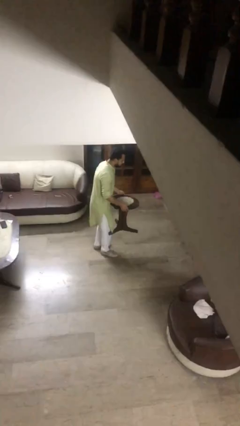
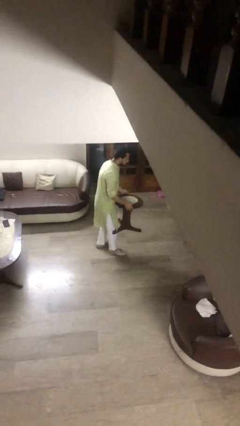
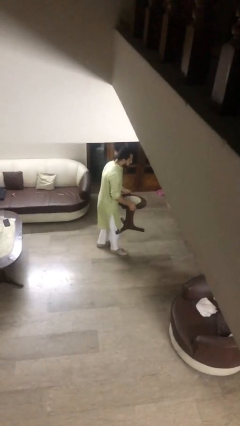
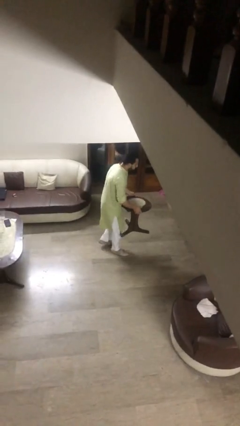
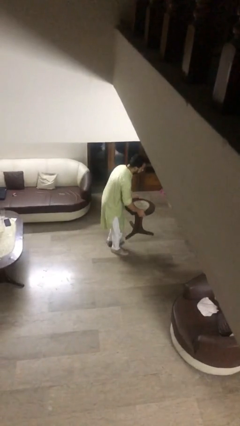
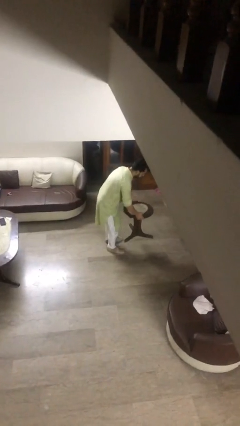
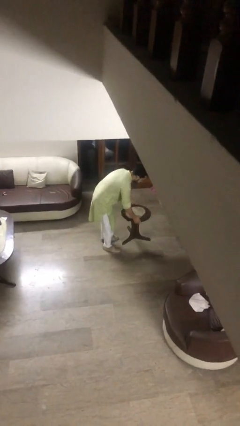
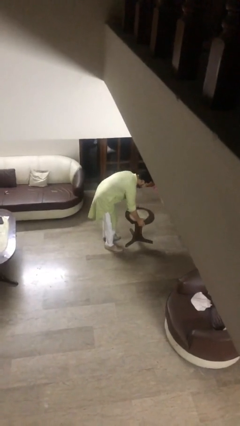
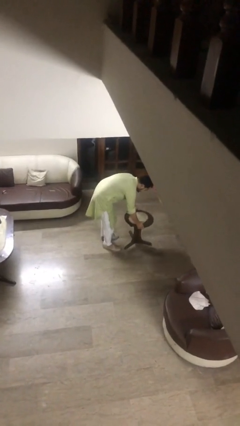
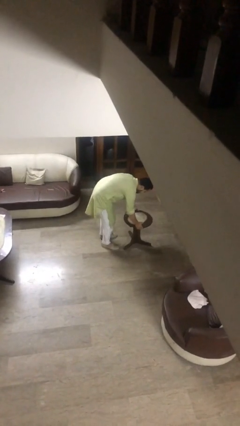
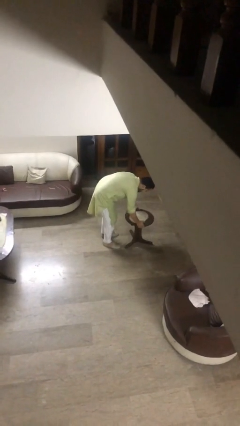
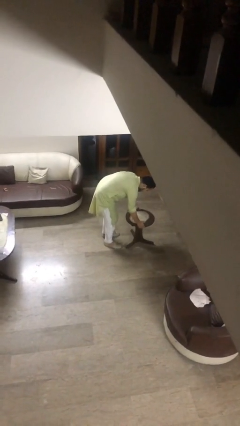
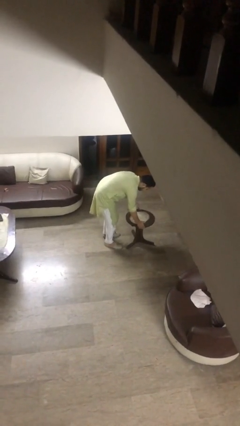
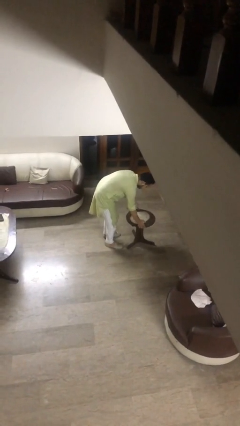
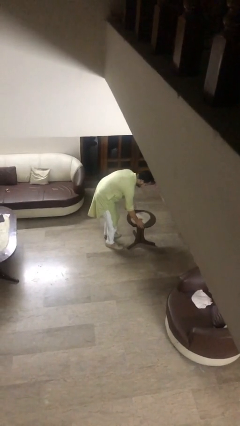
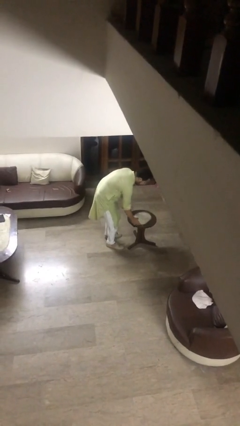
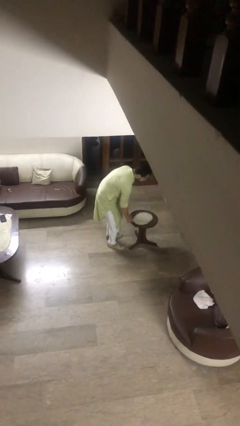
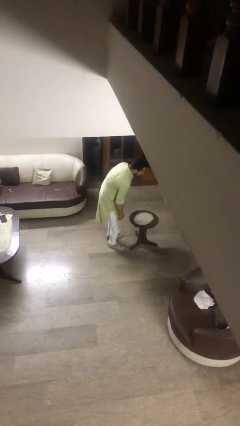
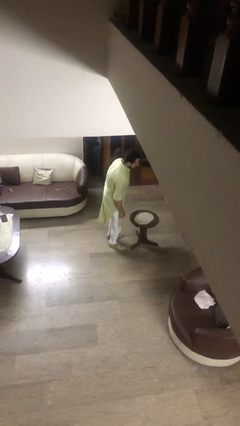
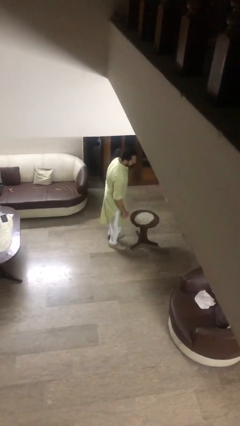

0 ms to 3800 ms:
person puts down object on floor

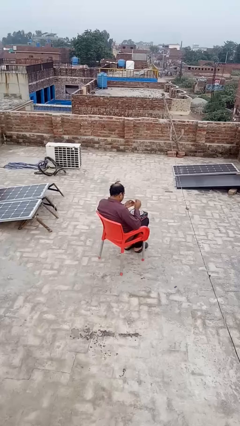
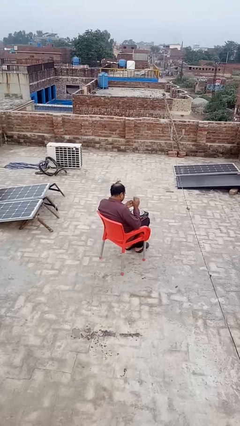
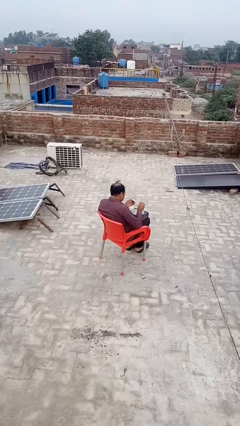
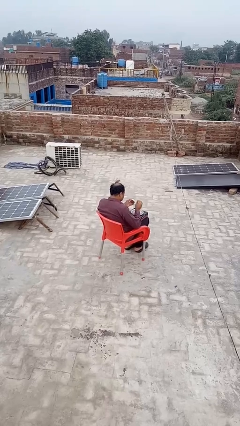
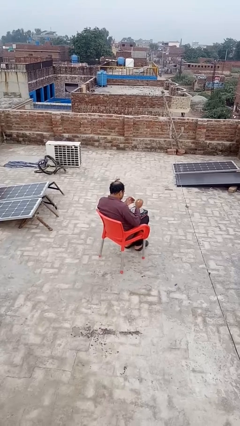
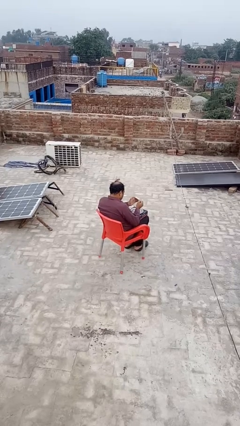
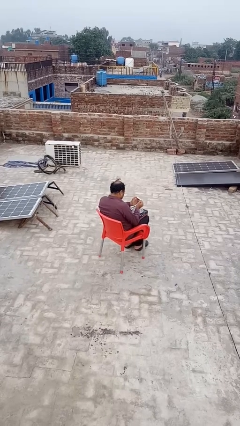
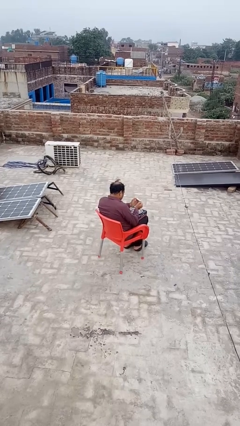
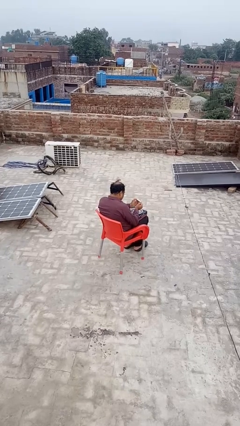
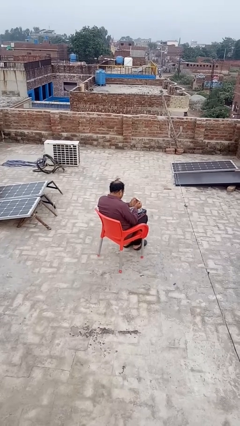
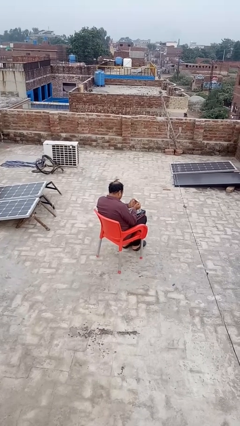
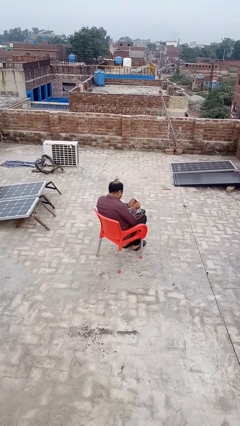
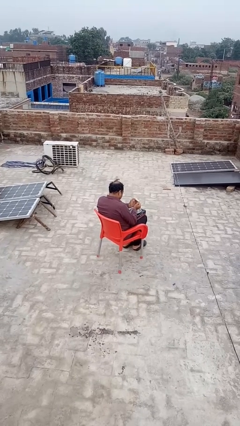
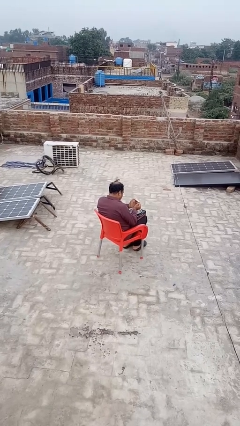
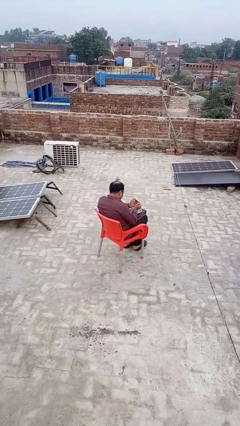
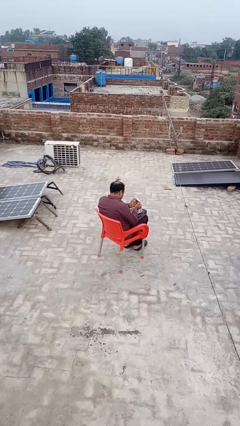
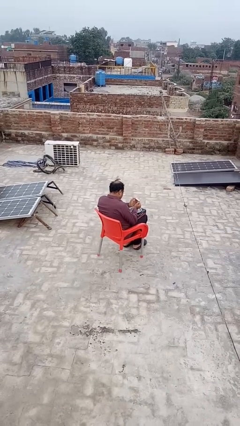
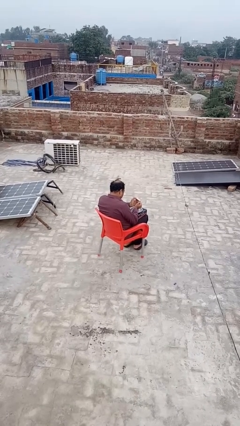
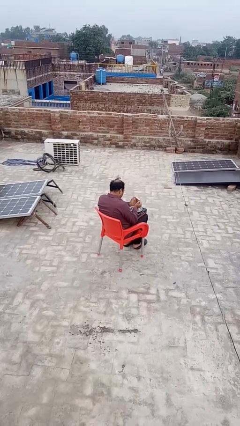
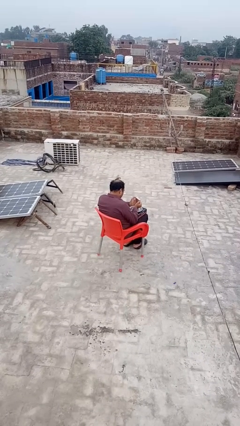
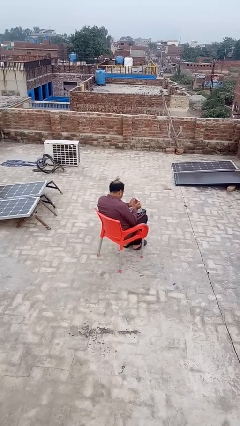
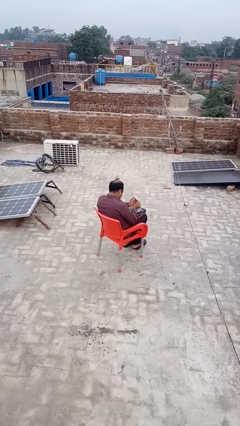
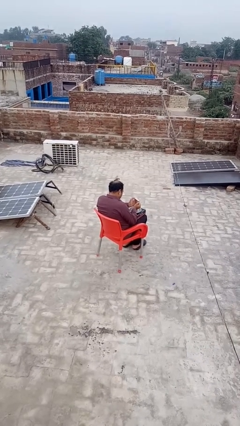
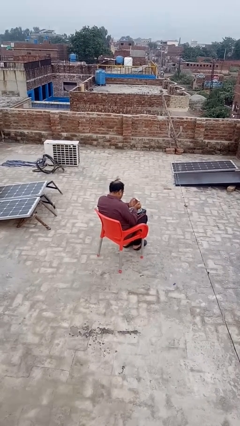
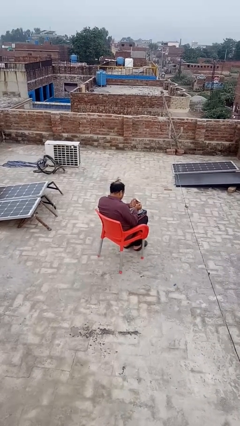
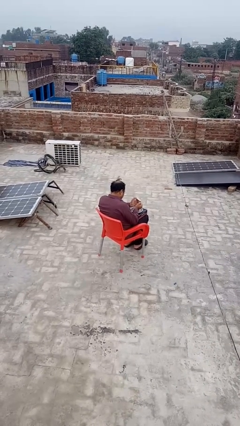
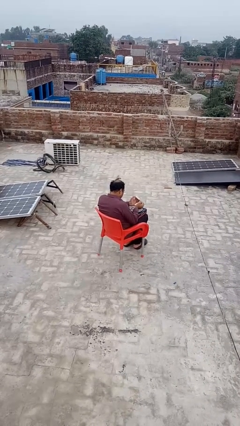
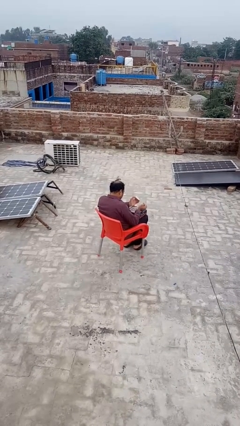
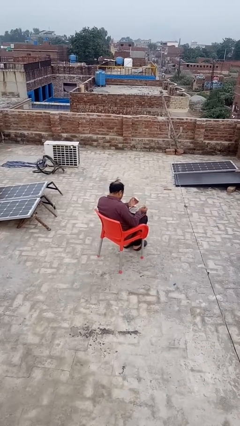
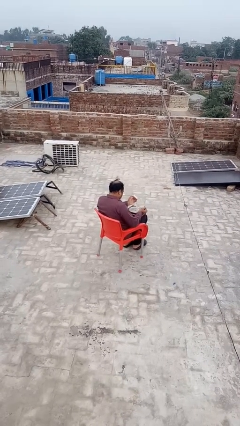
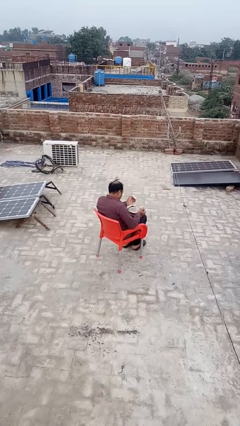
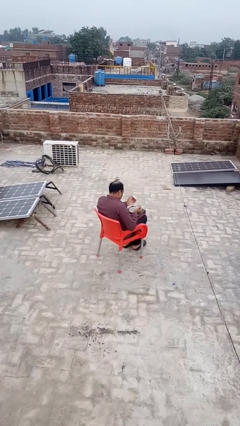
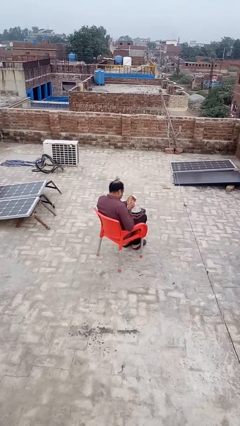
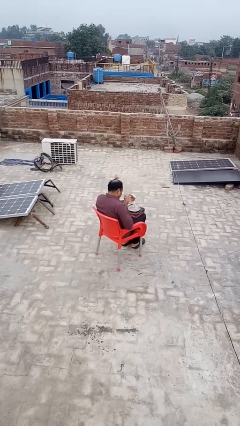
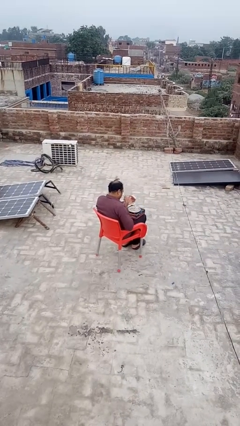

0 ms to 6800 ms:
person lights candle

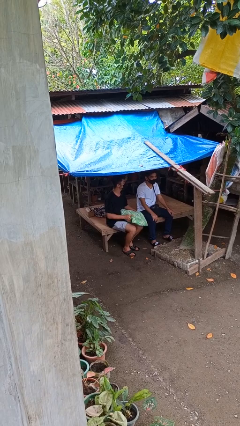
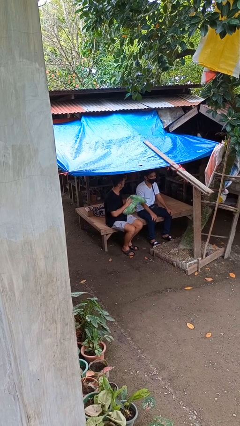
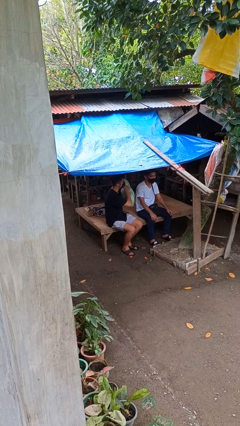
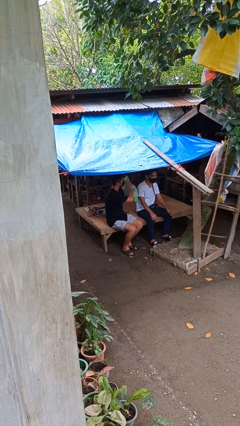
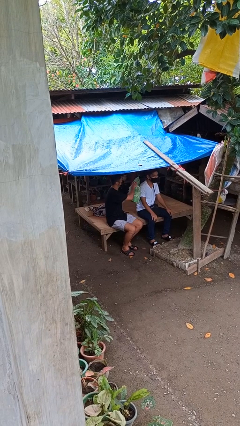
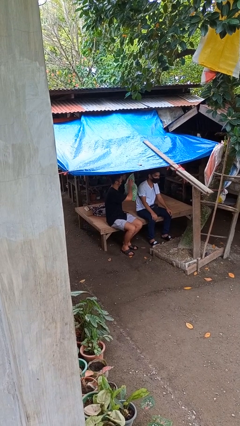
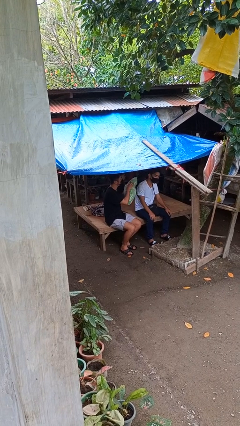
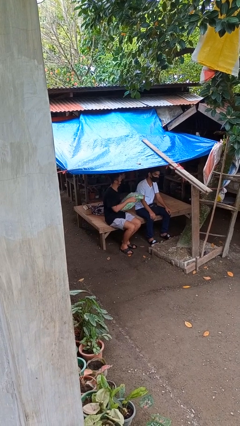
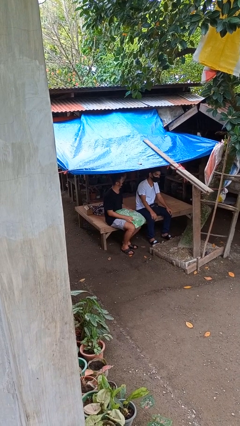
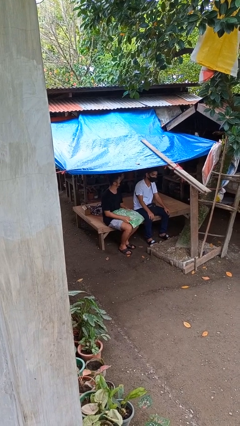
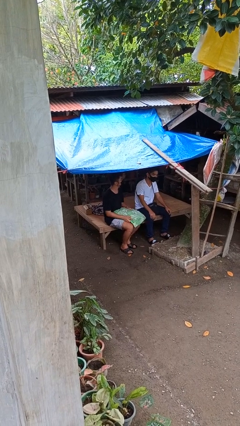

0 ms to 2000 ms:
person hits person with pillow

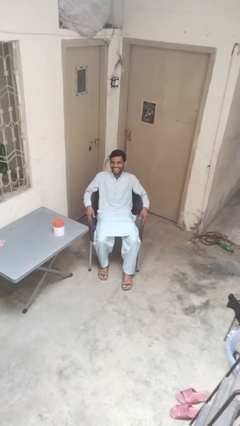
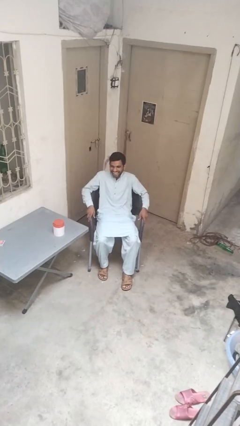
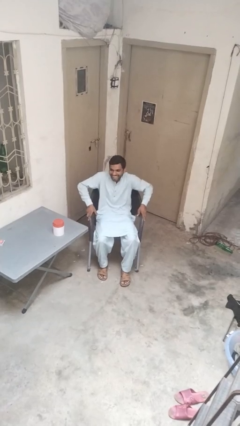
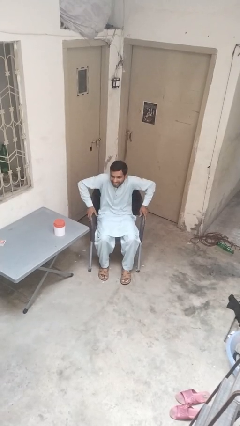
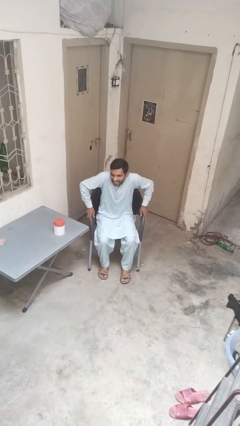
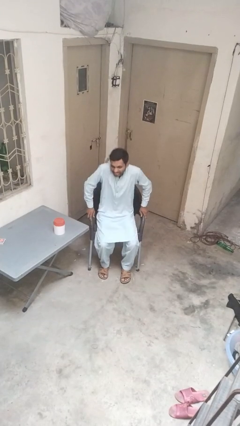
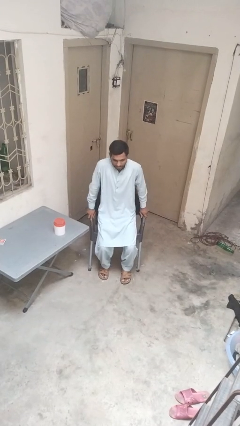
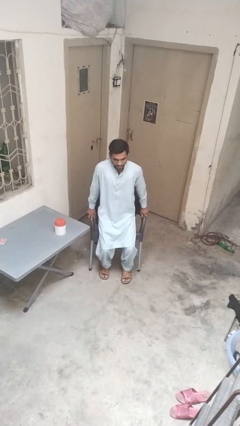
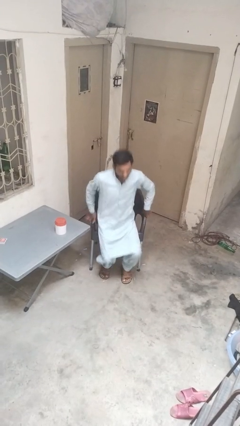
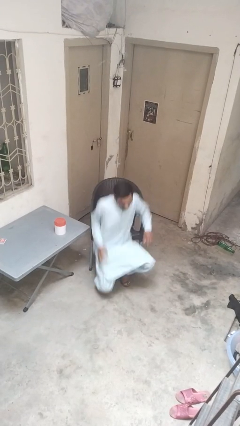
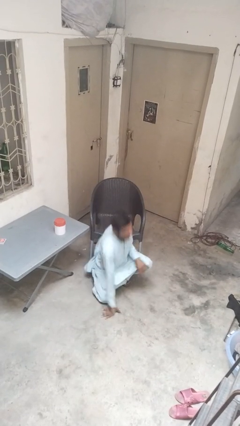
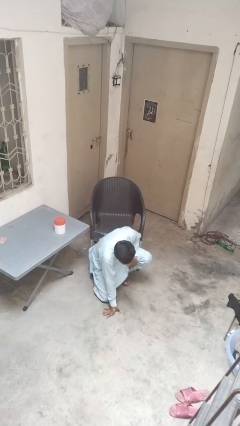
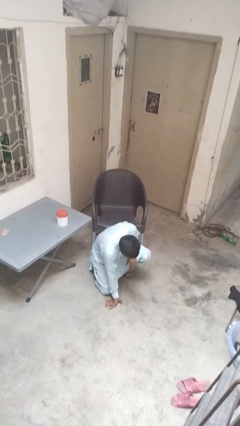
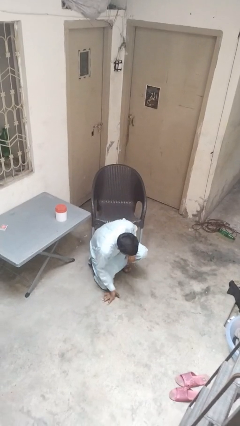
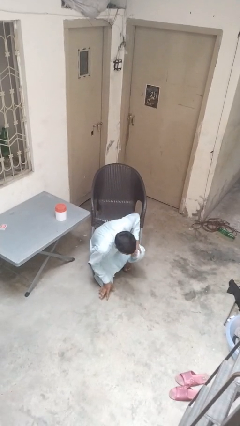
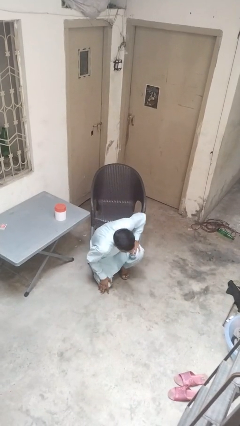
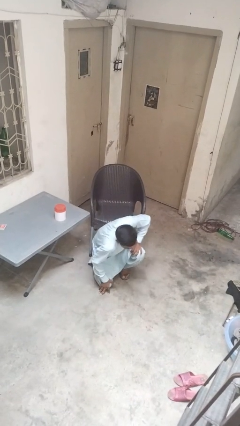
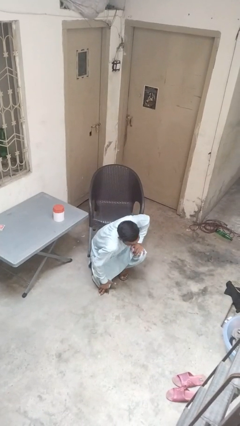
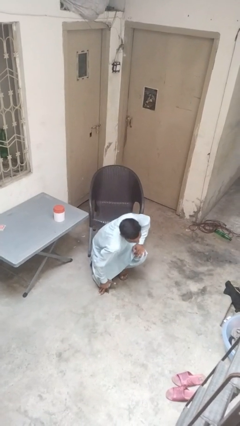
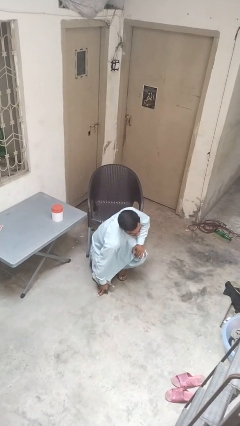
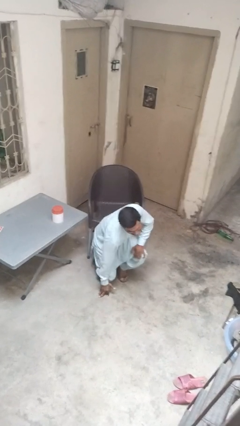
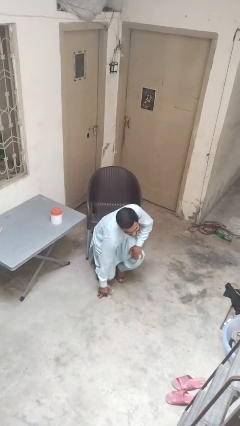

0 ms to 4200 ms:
person falls from chair

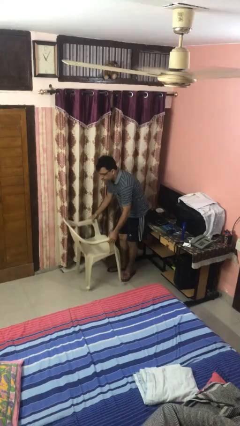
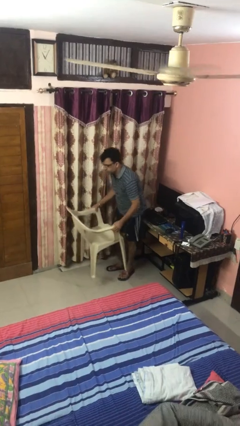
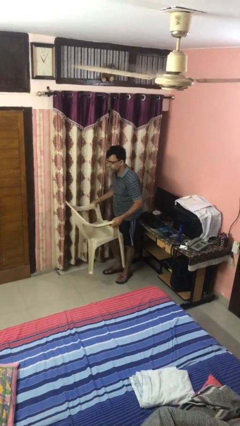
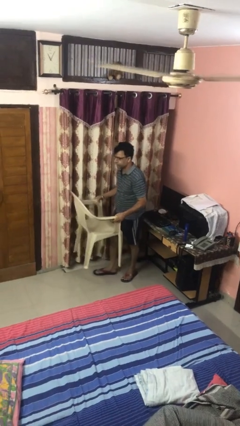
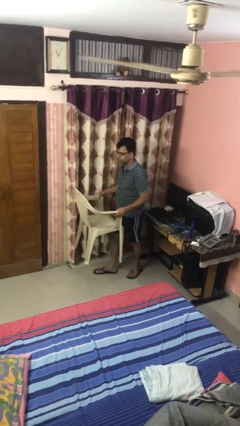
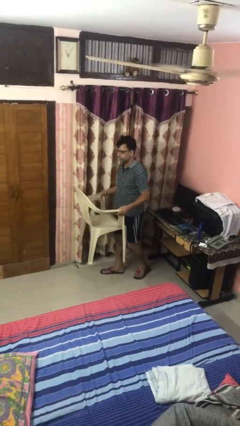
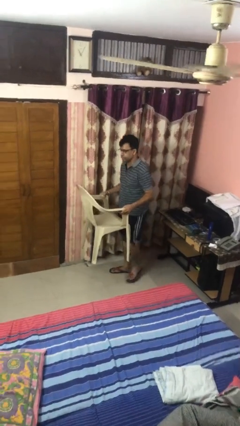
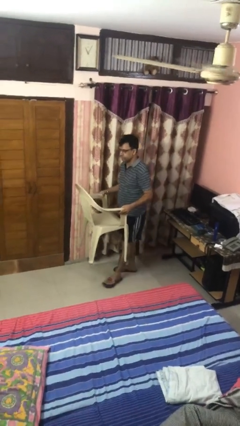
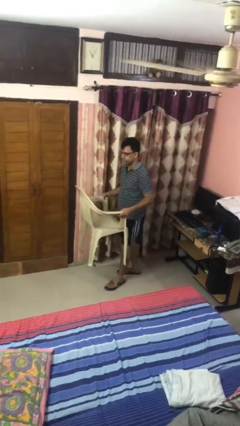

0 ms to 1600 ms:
person carries furniture
